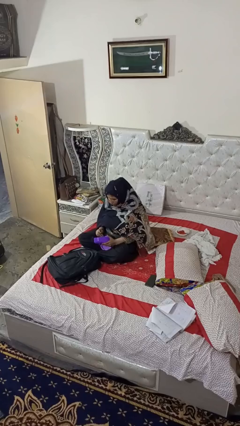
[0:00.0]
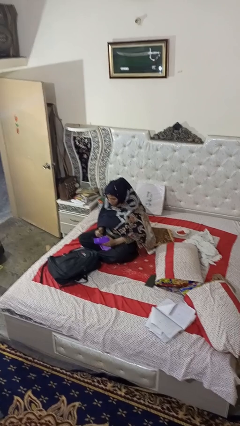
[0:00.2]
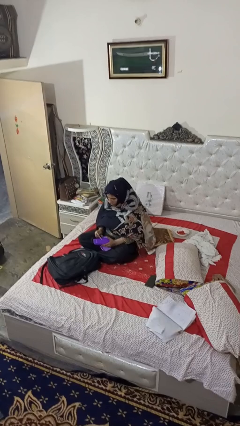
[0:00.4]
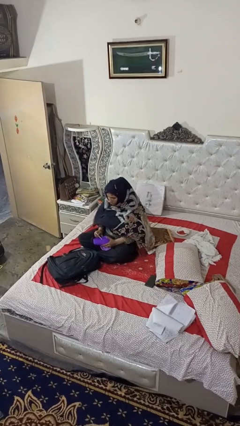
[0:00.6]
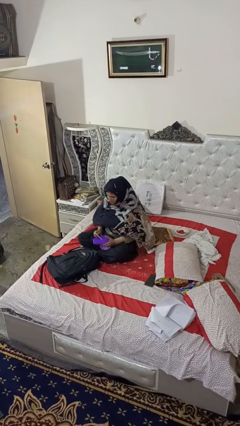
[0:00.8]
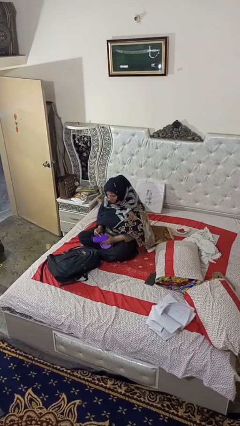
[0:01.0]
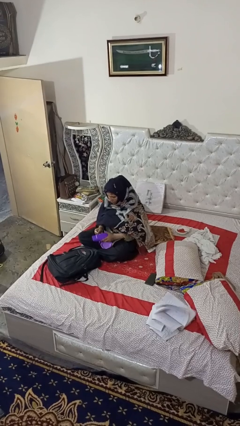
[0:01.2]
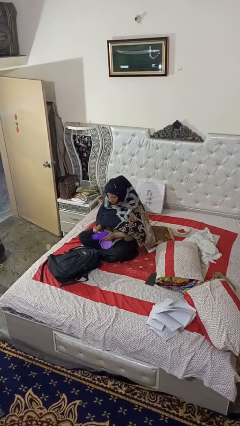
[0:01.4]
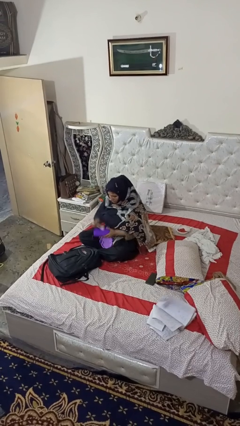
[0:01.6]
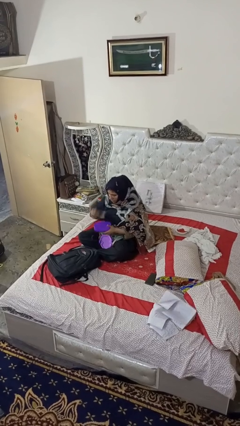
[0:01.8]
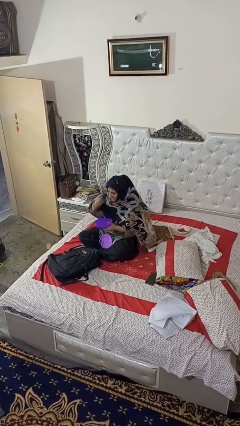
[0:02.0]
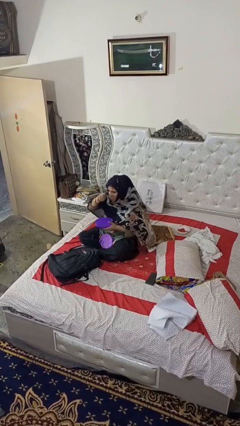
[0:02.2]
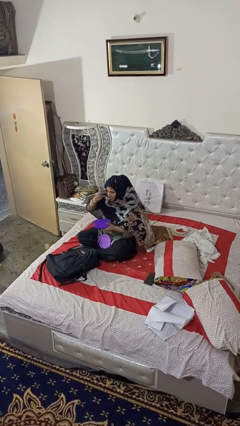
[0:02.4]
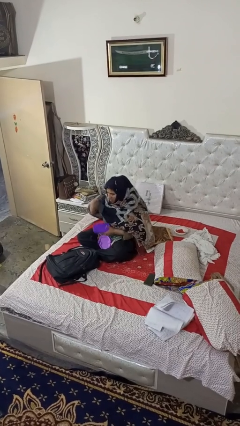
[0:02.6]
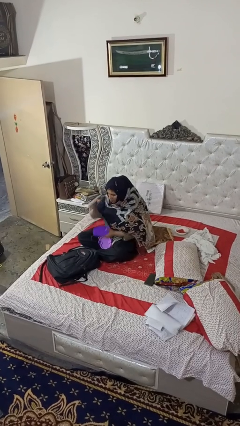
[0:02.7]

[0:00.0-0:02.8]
person eats snack from bag

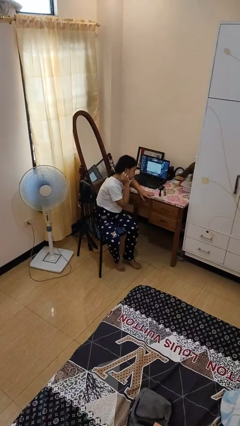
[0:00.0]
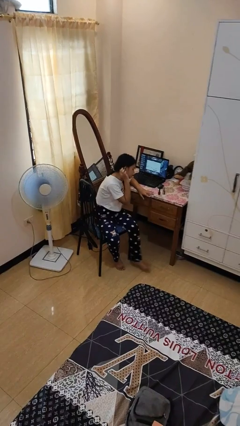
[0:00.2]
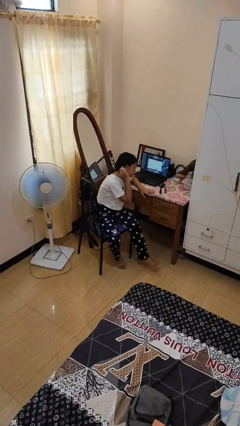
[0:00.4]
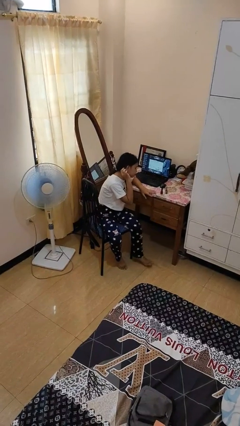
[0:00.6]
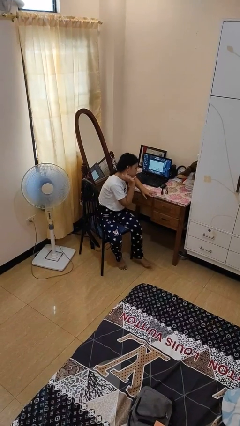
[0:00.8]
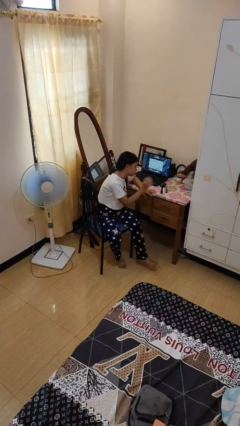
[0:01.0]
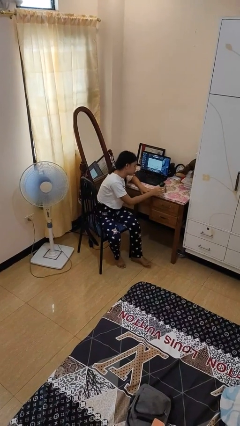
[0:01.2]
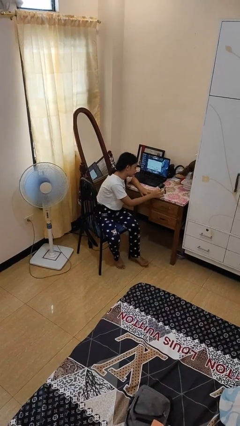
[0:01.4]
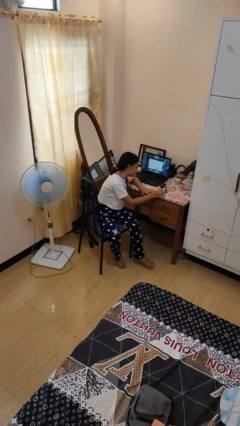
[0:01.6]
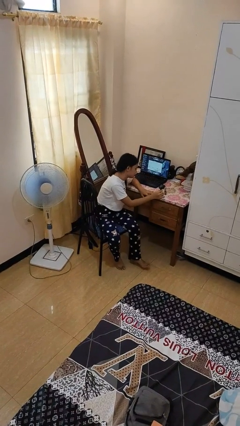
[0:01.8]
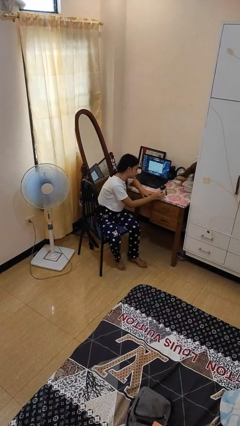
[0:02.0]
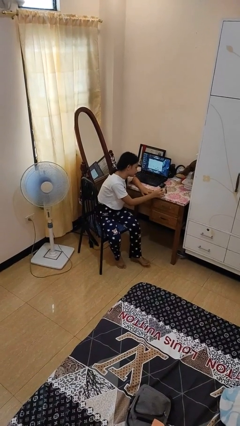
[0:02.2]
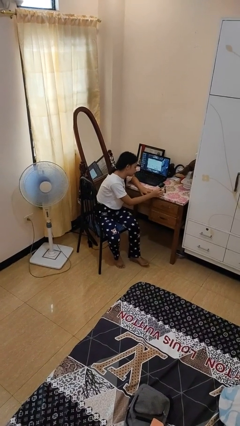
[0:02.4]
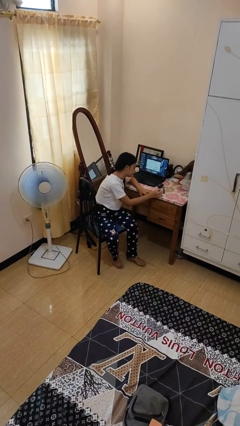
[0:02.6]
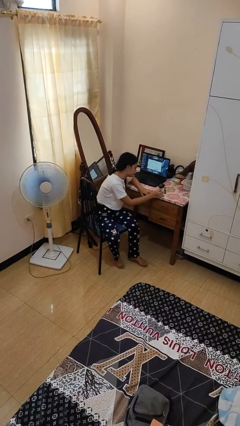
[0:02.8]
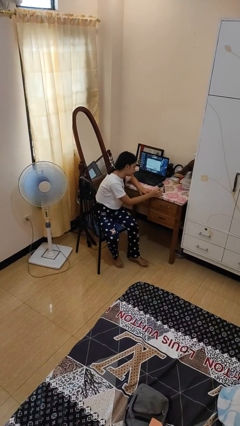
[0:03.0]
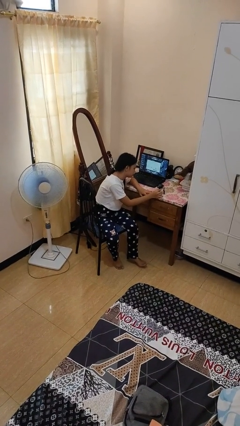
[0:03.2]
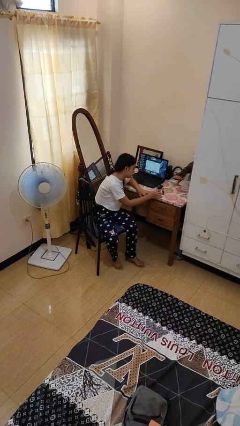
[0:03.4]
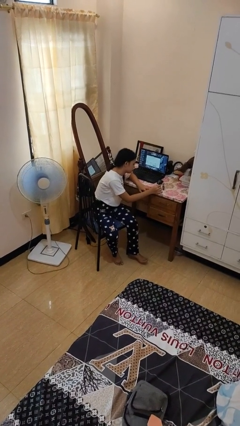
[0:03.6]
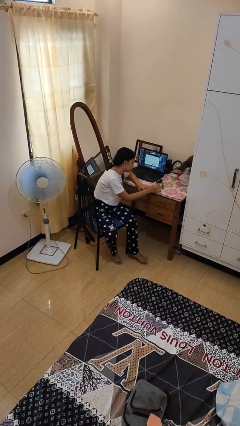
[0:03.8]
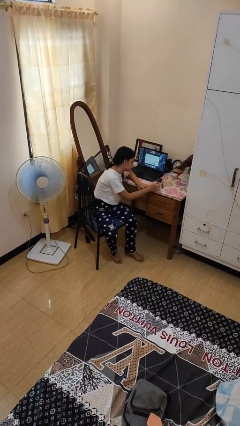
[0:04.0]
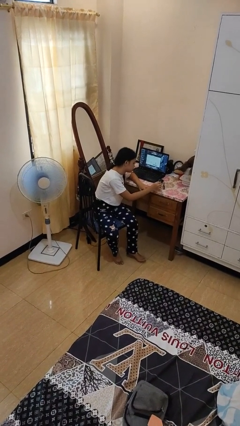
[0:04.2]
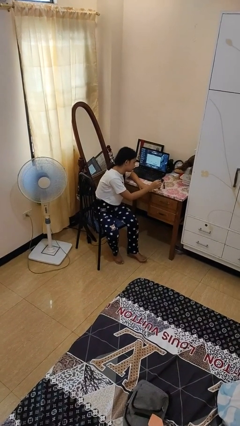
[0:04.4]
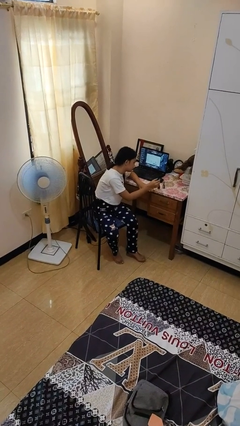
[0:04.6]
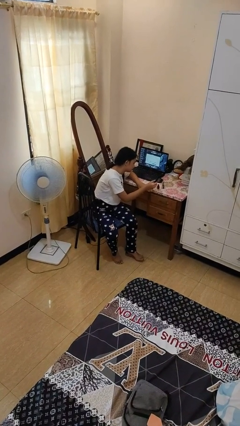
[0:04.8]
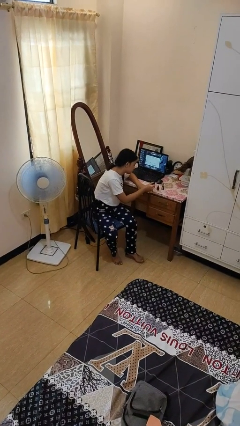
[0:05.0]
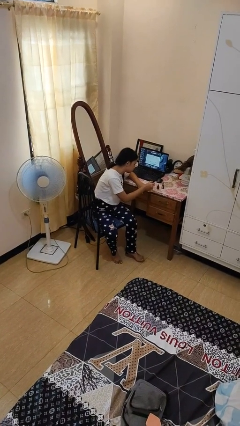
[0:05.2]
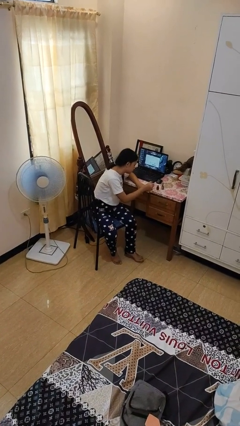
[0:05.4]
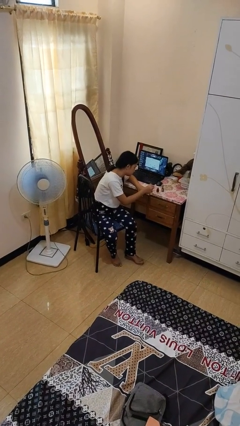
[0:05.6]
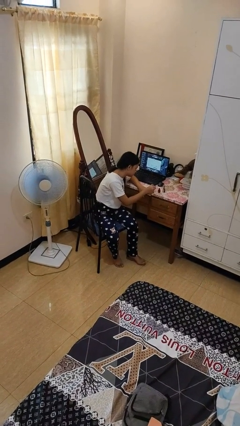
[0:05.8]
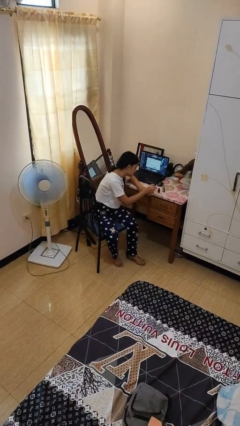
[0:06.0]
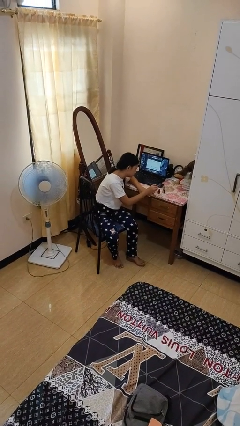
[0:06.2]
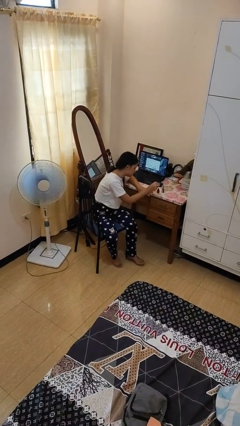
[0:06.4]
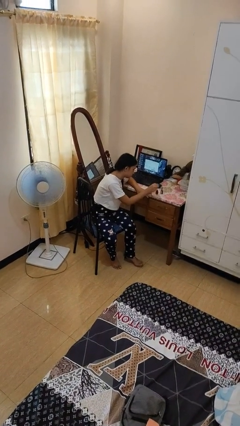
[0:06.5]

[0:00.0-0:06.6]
person paints fingernails

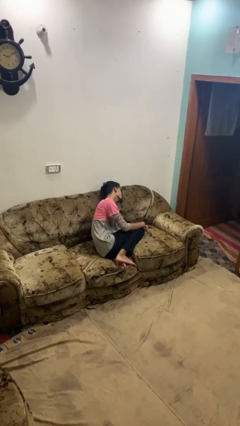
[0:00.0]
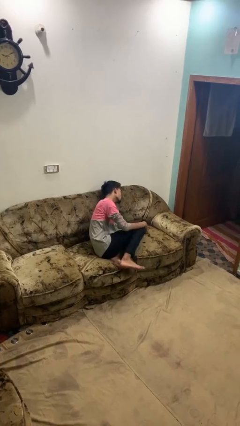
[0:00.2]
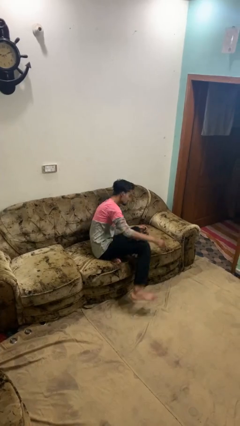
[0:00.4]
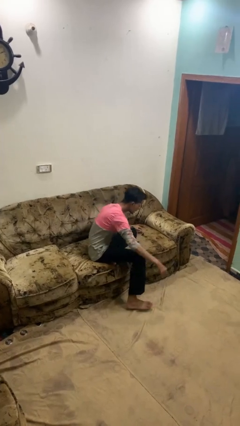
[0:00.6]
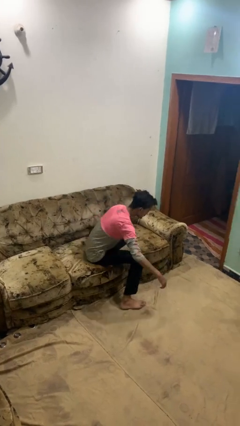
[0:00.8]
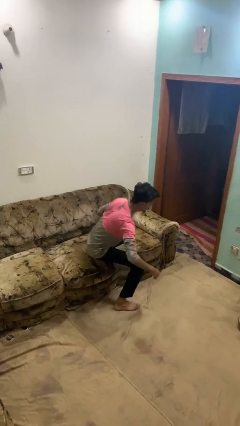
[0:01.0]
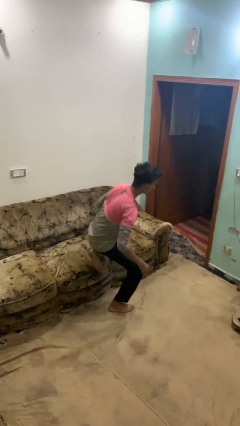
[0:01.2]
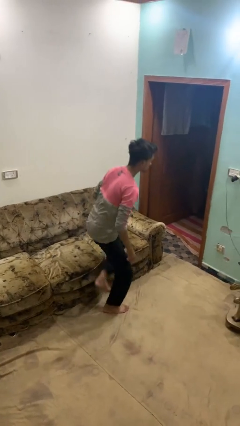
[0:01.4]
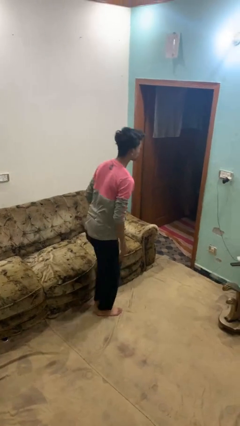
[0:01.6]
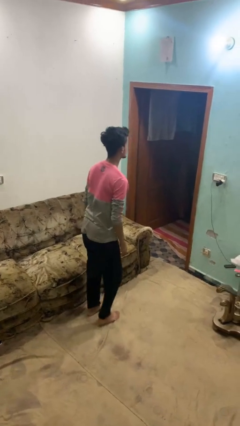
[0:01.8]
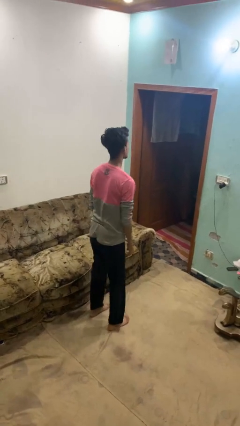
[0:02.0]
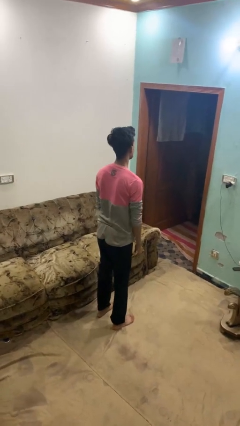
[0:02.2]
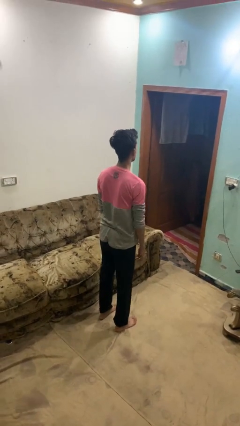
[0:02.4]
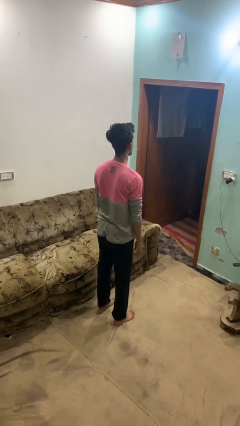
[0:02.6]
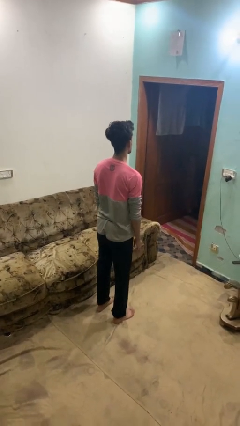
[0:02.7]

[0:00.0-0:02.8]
person stands up

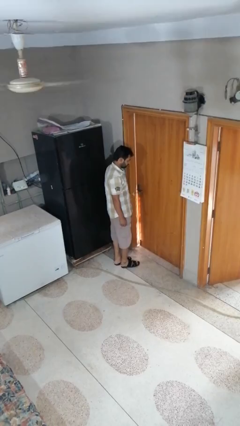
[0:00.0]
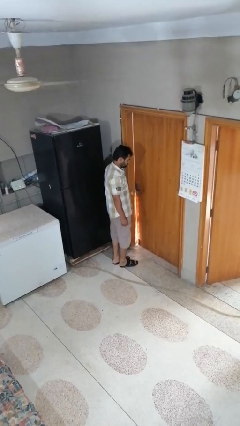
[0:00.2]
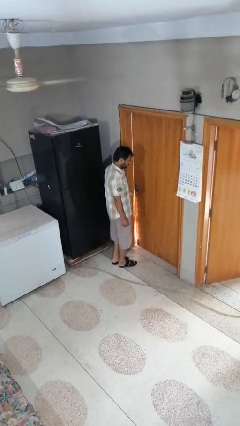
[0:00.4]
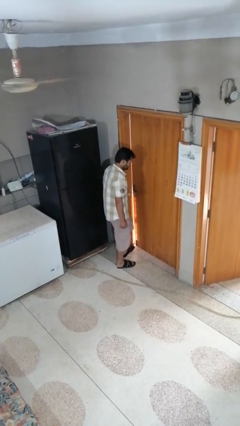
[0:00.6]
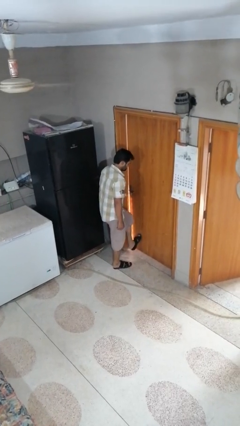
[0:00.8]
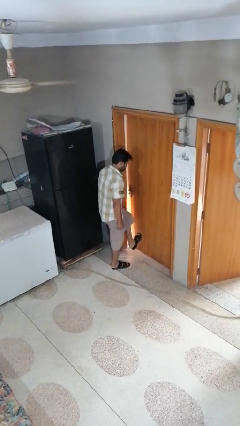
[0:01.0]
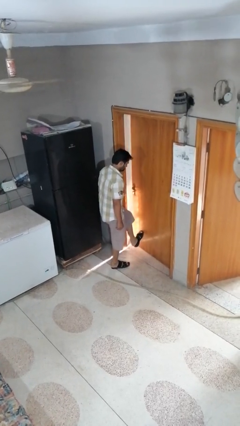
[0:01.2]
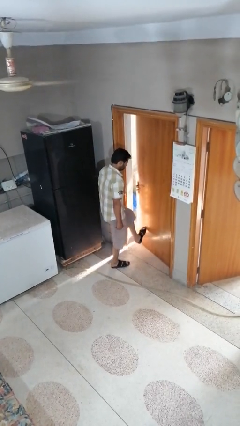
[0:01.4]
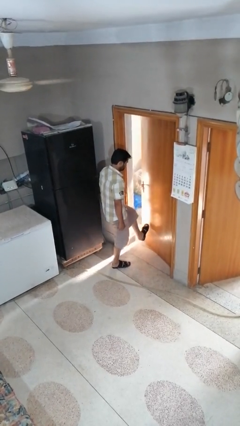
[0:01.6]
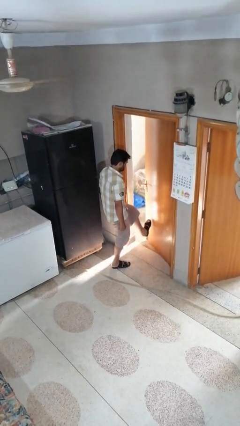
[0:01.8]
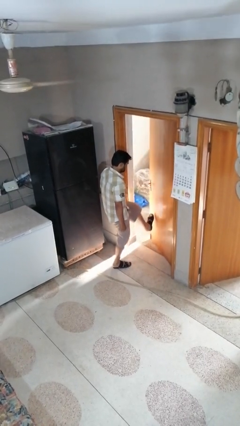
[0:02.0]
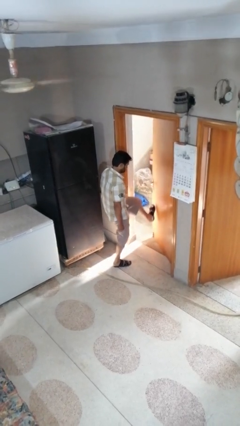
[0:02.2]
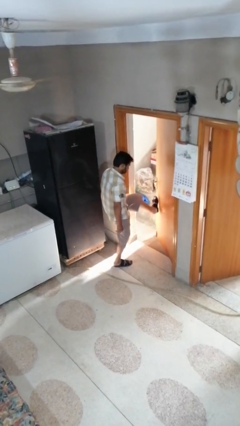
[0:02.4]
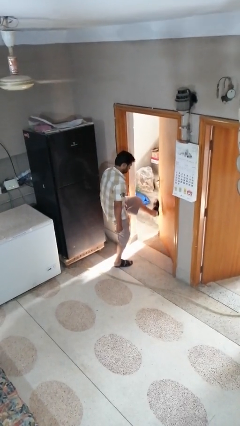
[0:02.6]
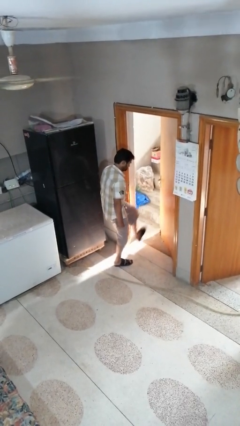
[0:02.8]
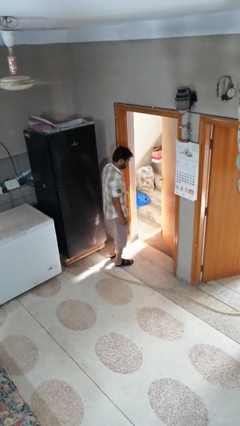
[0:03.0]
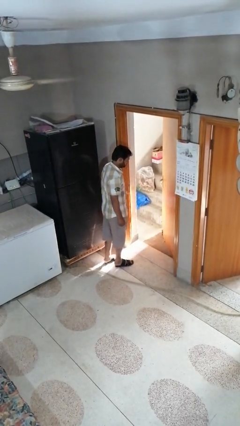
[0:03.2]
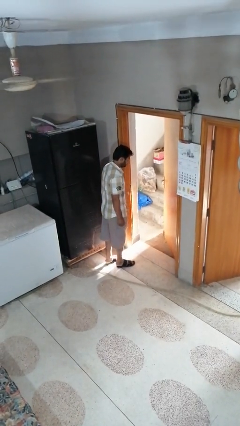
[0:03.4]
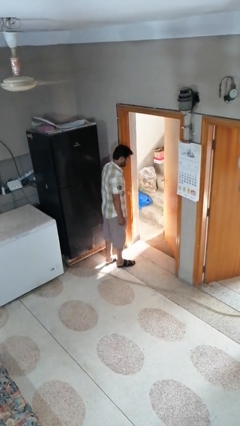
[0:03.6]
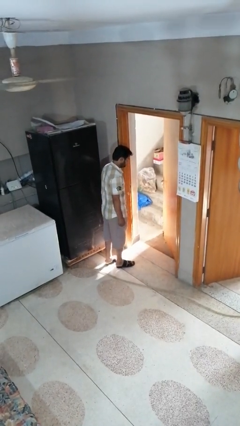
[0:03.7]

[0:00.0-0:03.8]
person opens facility door

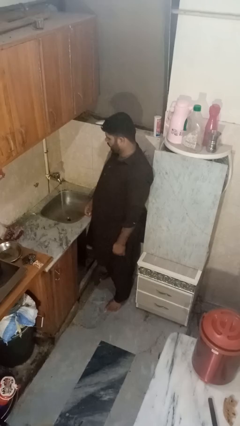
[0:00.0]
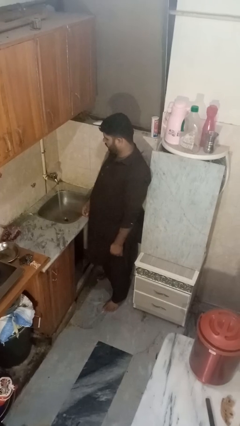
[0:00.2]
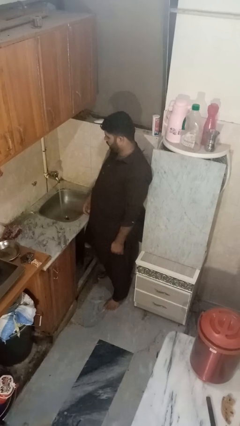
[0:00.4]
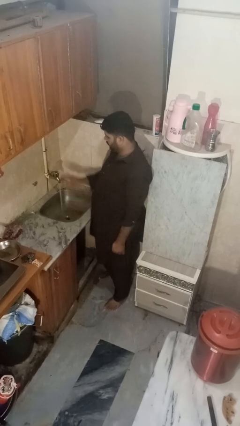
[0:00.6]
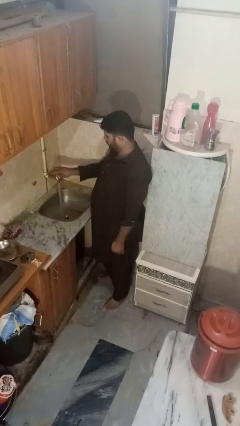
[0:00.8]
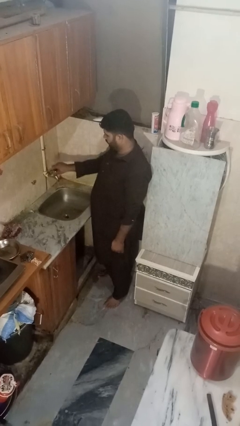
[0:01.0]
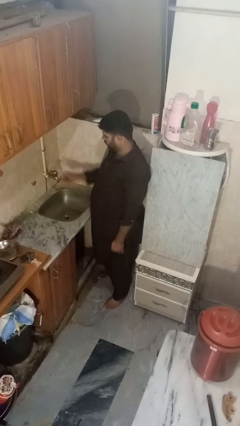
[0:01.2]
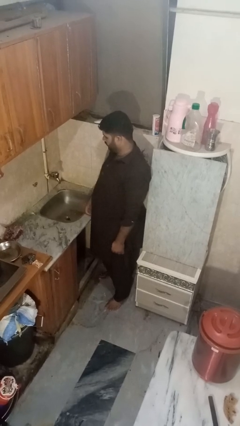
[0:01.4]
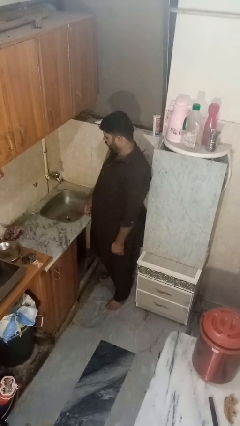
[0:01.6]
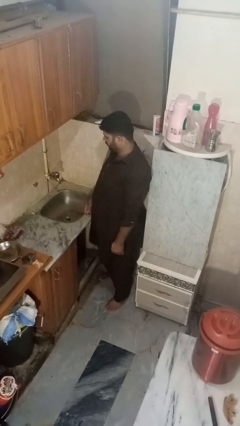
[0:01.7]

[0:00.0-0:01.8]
person turns off faucet
